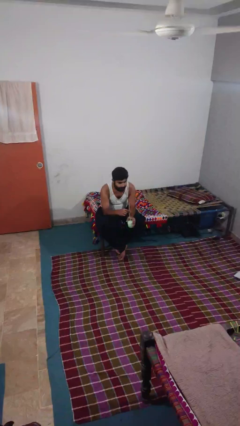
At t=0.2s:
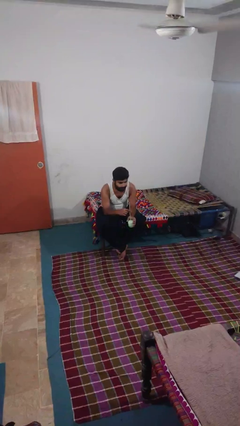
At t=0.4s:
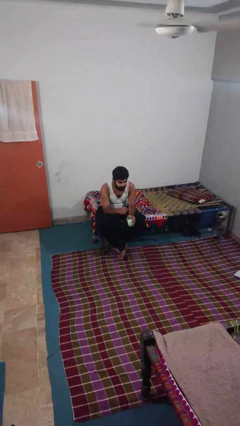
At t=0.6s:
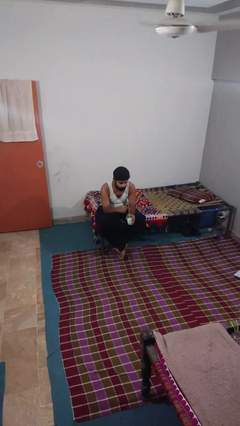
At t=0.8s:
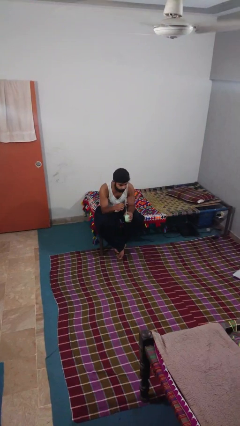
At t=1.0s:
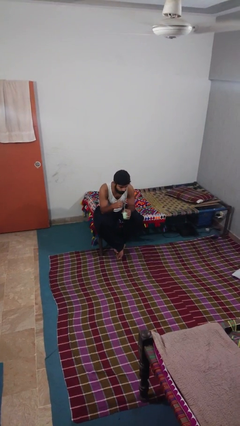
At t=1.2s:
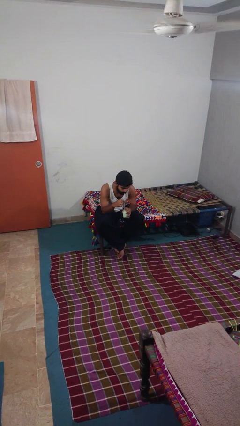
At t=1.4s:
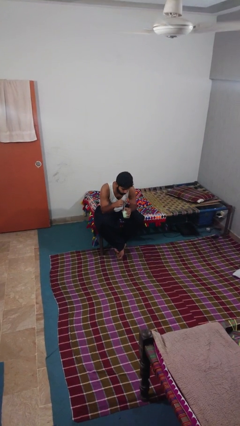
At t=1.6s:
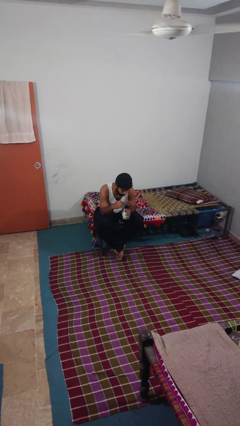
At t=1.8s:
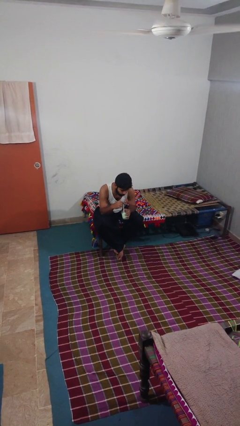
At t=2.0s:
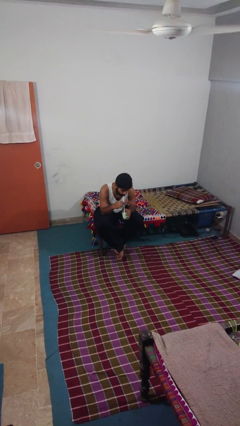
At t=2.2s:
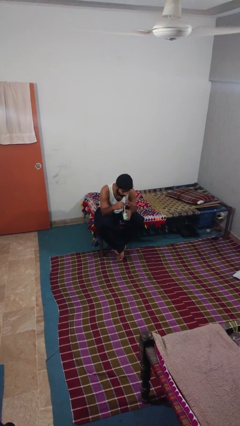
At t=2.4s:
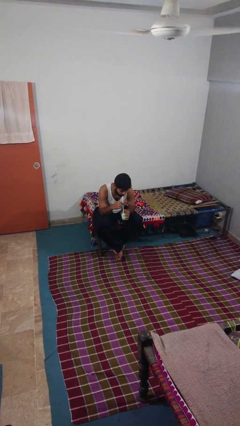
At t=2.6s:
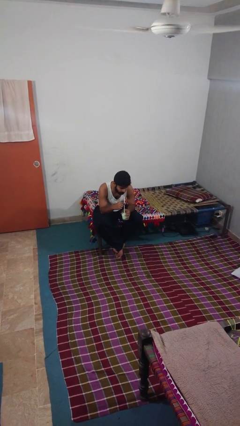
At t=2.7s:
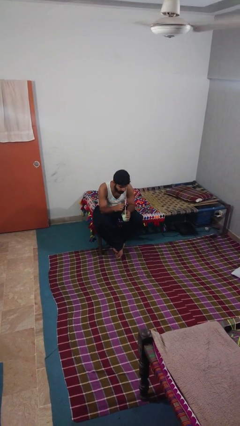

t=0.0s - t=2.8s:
person drinks from straw

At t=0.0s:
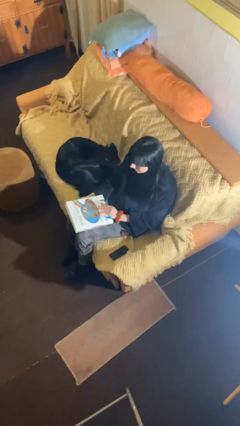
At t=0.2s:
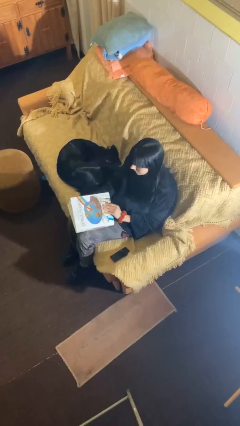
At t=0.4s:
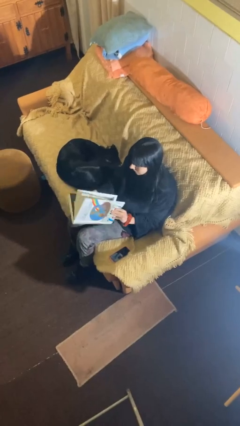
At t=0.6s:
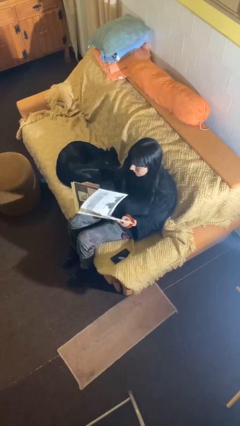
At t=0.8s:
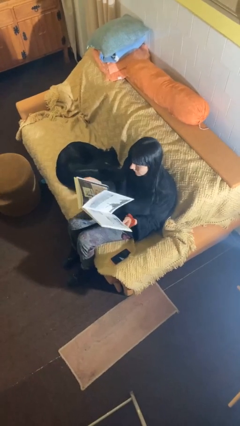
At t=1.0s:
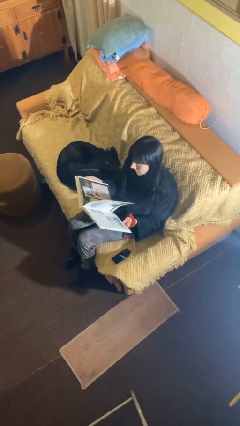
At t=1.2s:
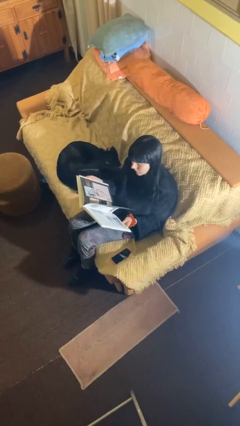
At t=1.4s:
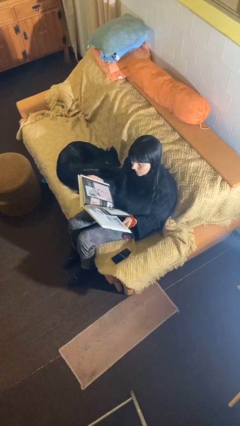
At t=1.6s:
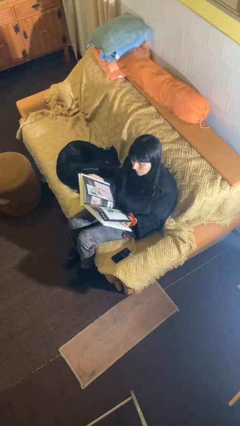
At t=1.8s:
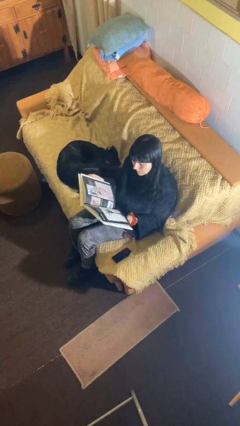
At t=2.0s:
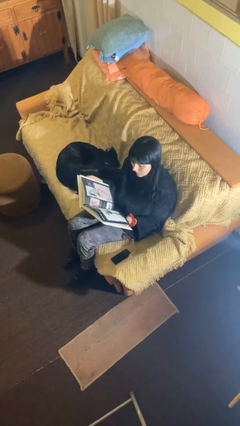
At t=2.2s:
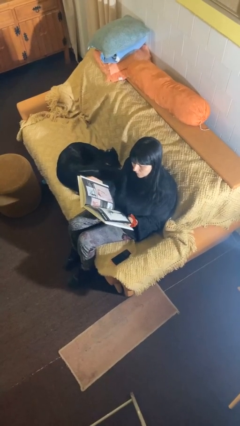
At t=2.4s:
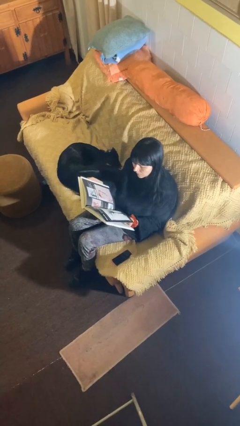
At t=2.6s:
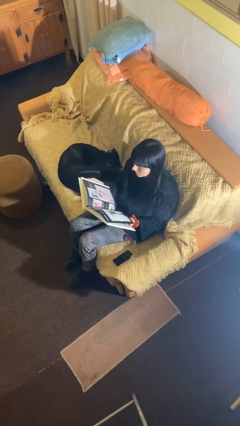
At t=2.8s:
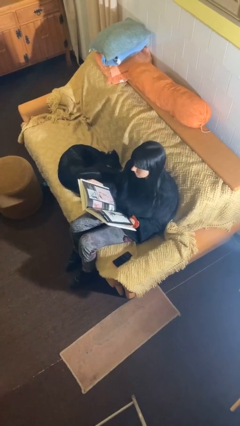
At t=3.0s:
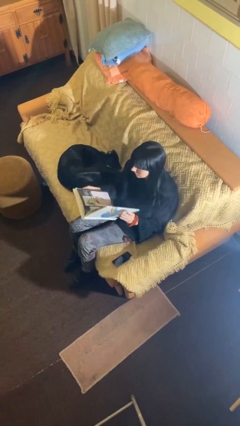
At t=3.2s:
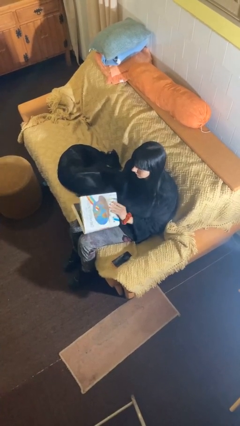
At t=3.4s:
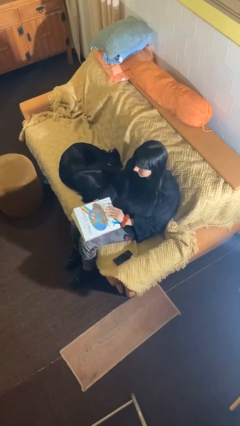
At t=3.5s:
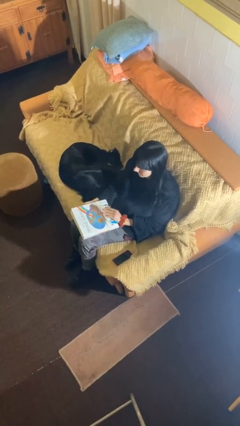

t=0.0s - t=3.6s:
person reads document

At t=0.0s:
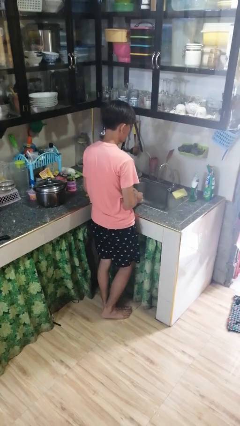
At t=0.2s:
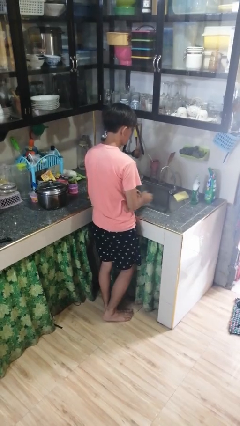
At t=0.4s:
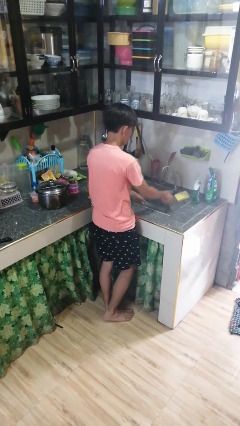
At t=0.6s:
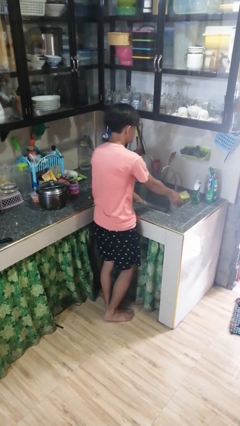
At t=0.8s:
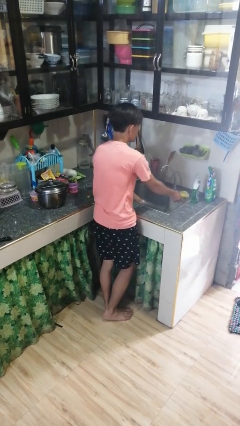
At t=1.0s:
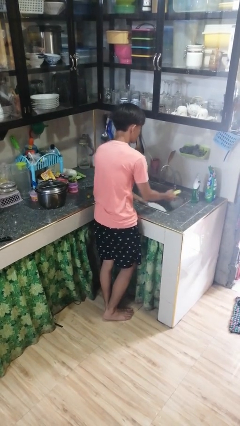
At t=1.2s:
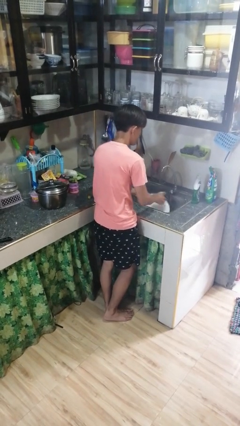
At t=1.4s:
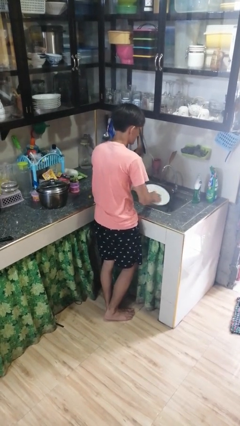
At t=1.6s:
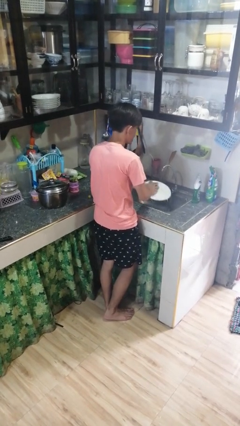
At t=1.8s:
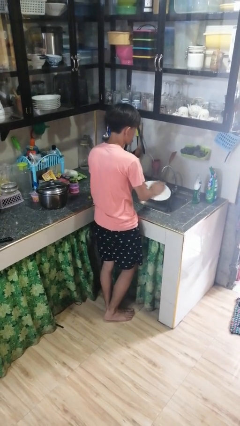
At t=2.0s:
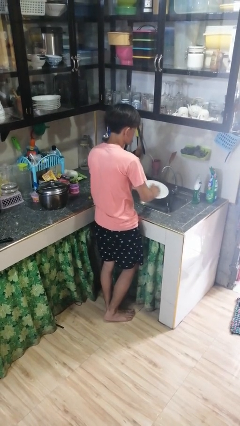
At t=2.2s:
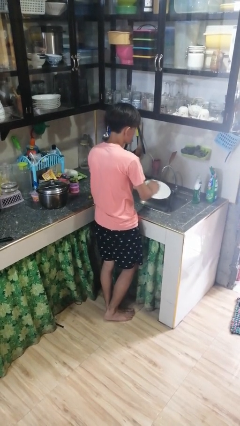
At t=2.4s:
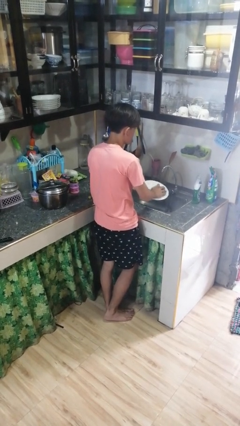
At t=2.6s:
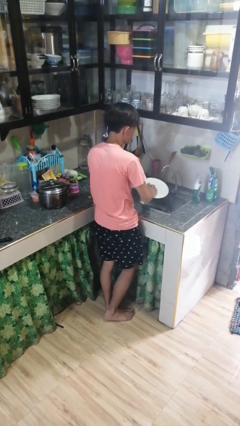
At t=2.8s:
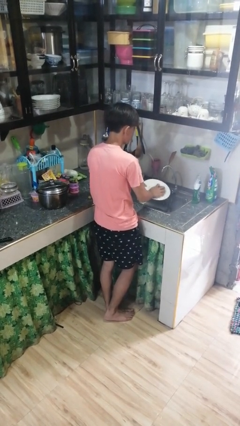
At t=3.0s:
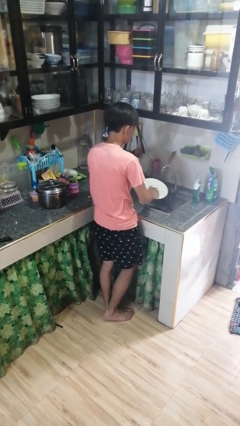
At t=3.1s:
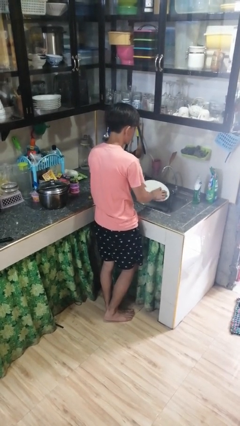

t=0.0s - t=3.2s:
person washes dish

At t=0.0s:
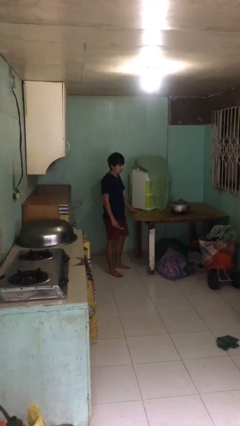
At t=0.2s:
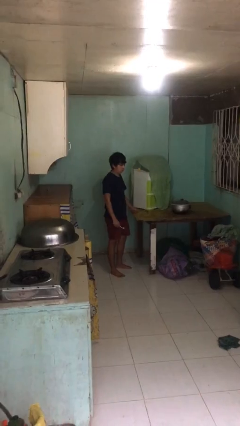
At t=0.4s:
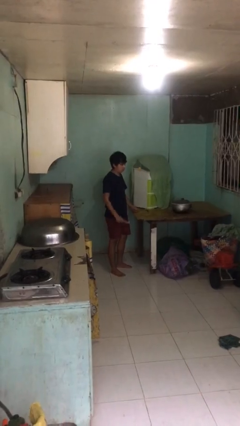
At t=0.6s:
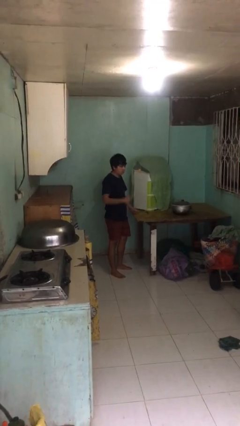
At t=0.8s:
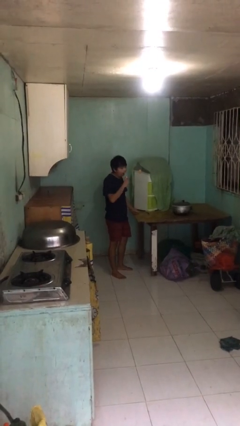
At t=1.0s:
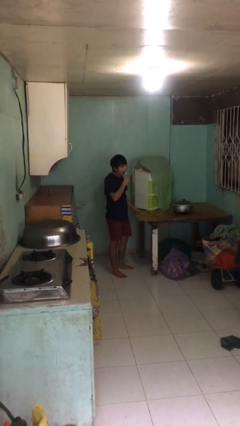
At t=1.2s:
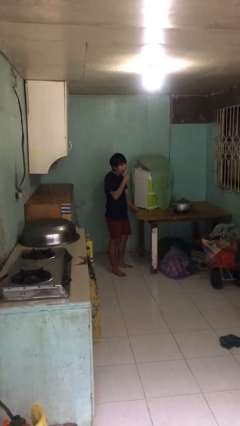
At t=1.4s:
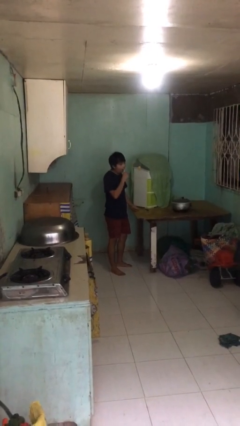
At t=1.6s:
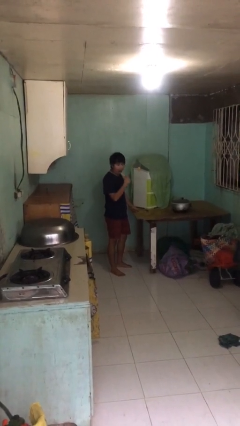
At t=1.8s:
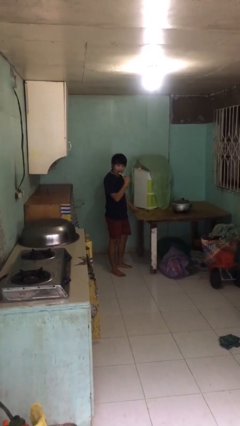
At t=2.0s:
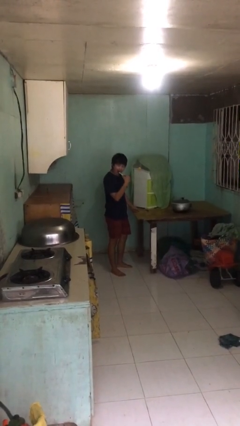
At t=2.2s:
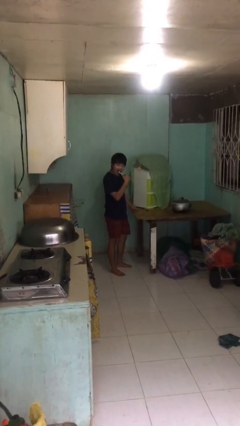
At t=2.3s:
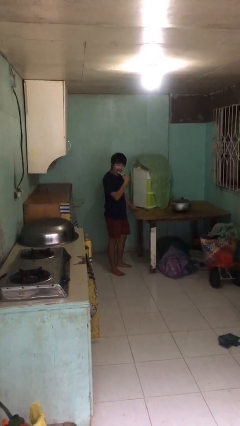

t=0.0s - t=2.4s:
person brushes teeth

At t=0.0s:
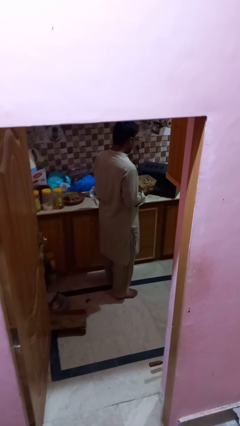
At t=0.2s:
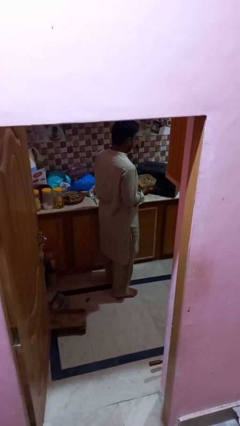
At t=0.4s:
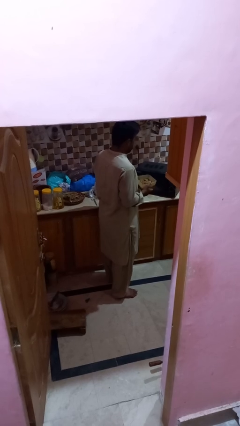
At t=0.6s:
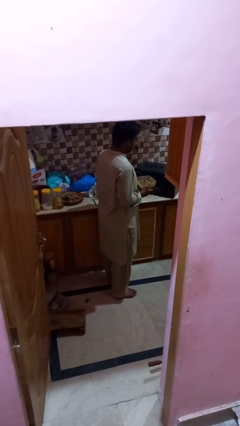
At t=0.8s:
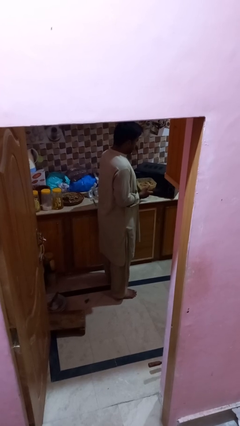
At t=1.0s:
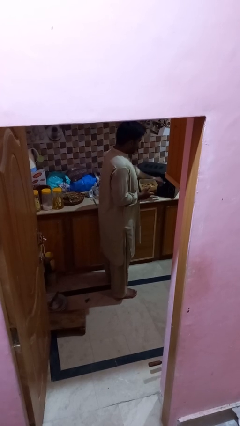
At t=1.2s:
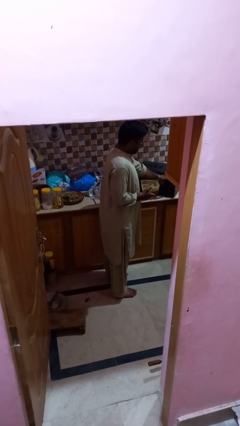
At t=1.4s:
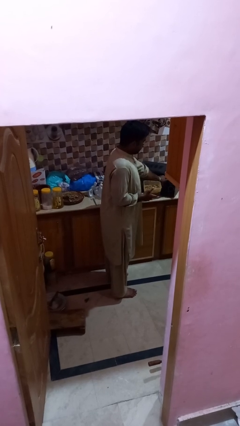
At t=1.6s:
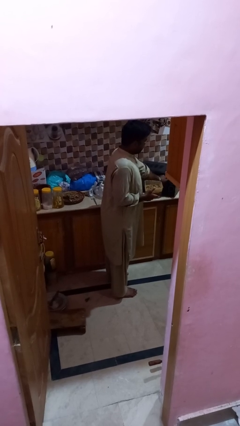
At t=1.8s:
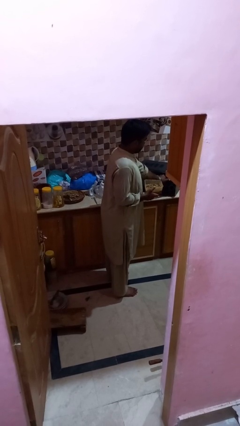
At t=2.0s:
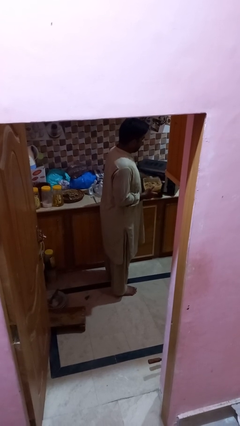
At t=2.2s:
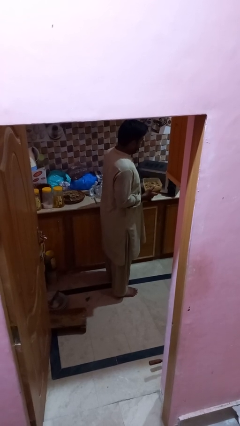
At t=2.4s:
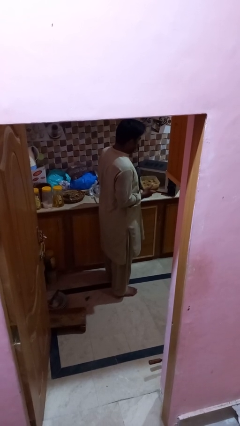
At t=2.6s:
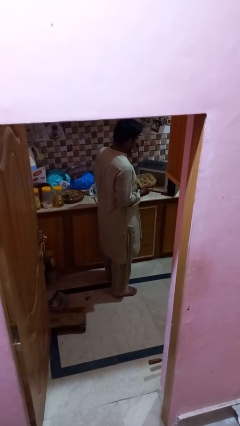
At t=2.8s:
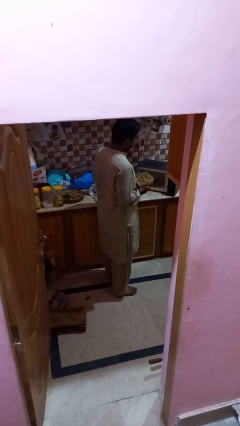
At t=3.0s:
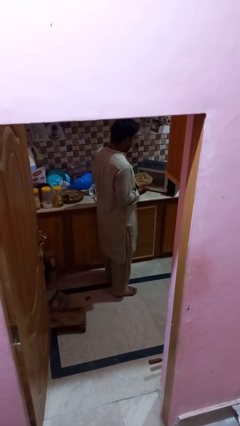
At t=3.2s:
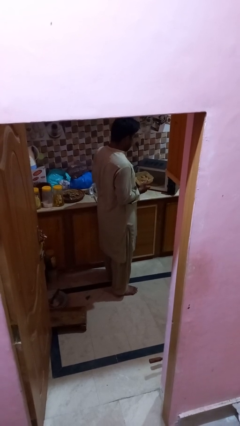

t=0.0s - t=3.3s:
person opens microwave

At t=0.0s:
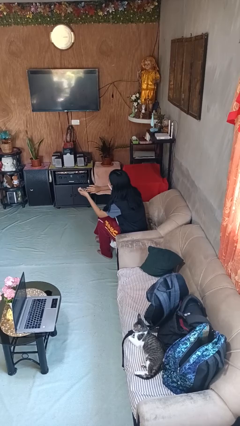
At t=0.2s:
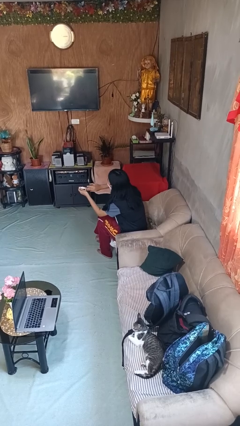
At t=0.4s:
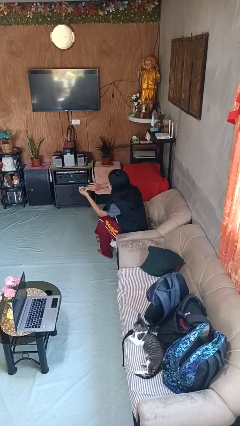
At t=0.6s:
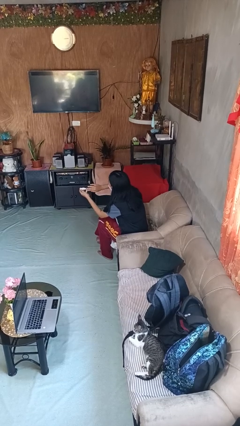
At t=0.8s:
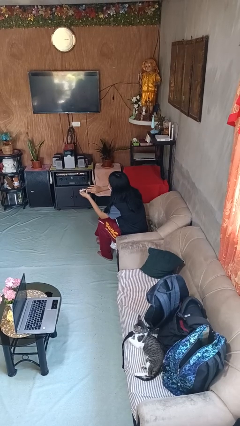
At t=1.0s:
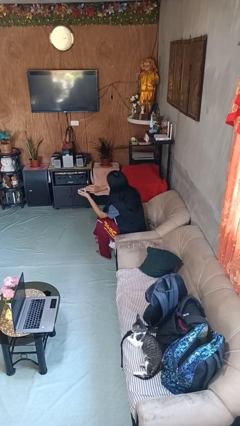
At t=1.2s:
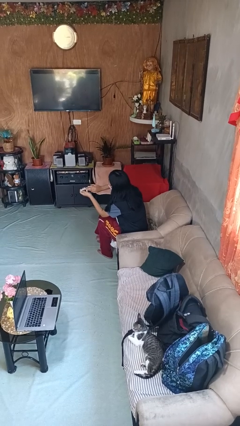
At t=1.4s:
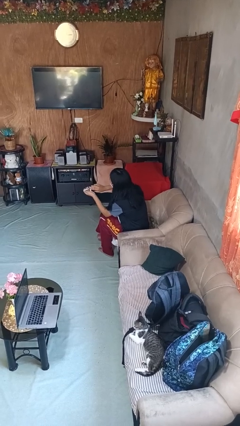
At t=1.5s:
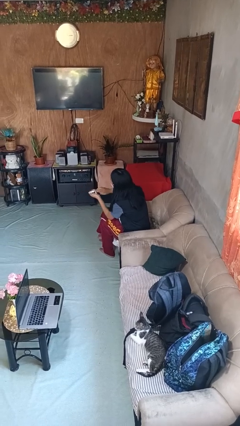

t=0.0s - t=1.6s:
person clips fingernails

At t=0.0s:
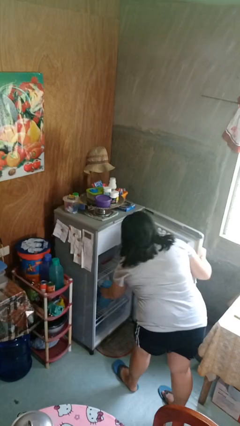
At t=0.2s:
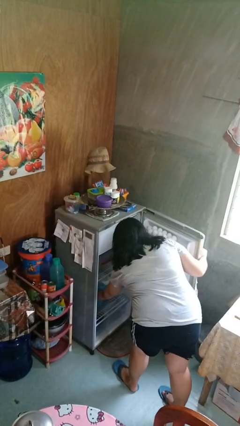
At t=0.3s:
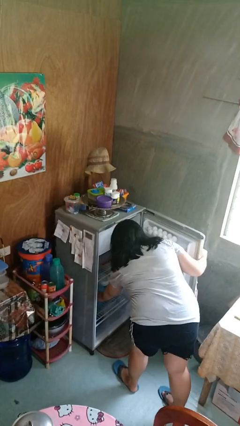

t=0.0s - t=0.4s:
person puts object into refrigerator
